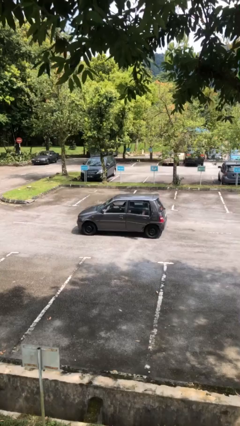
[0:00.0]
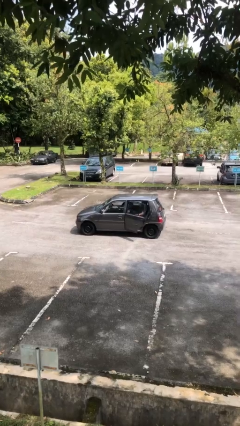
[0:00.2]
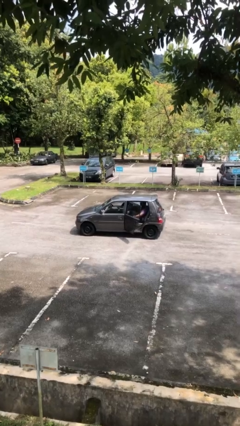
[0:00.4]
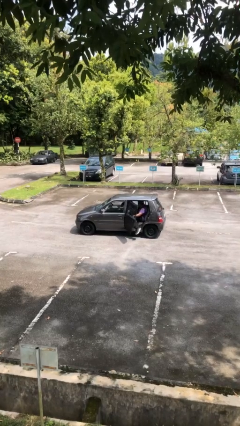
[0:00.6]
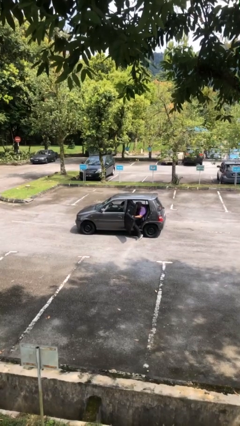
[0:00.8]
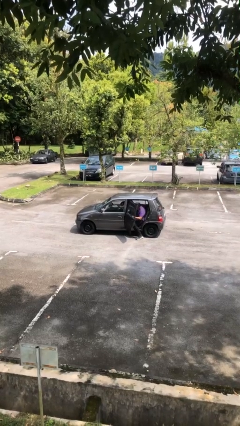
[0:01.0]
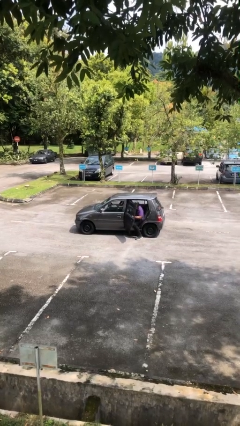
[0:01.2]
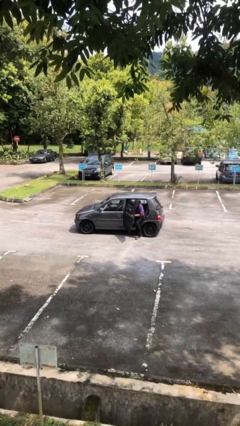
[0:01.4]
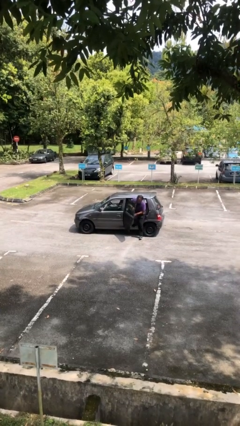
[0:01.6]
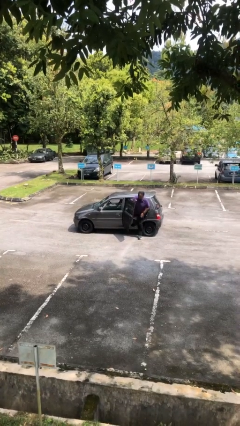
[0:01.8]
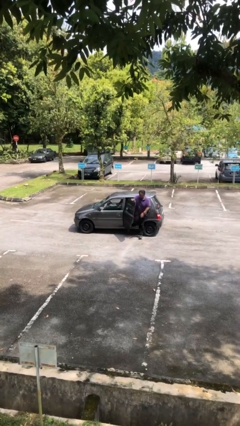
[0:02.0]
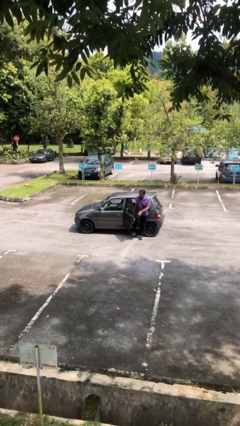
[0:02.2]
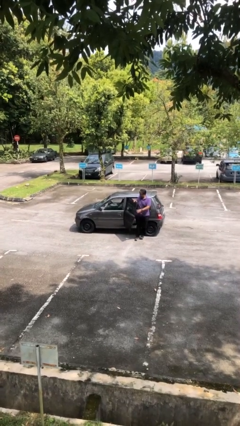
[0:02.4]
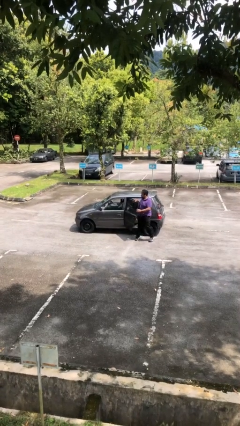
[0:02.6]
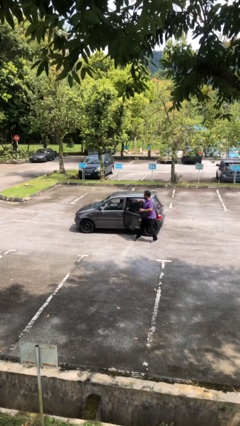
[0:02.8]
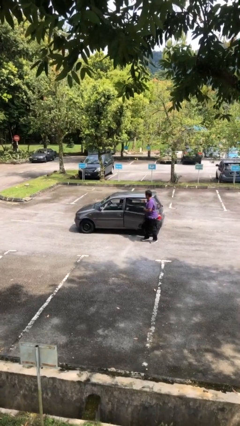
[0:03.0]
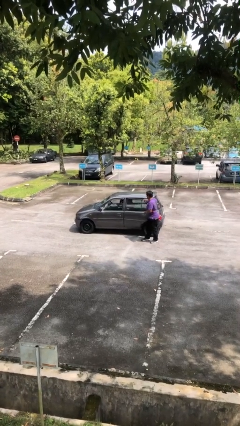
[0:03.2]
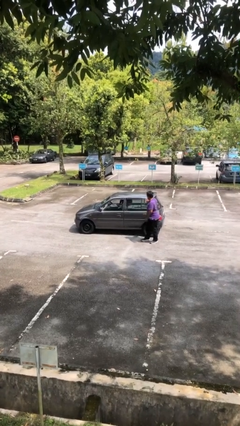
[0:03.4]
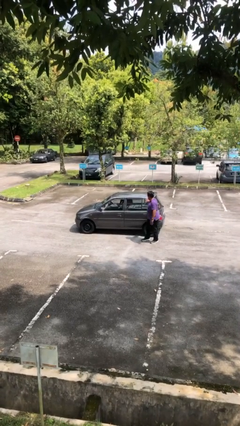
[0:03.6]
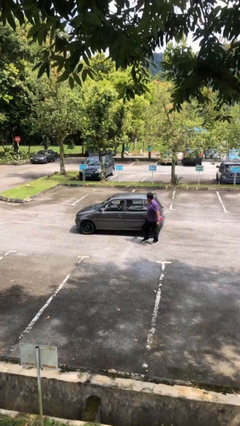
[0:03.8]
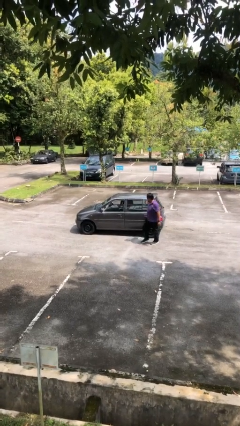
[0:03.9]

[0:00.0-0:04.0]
car drops off person

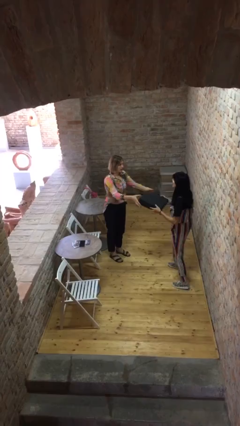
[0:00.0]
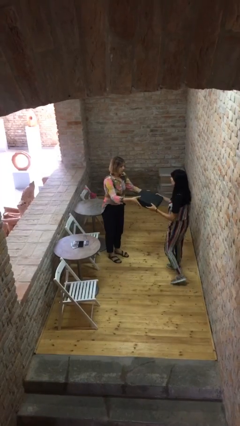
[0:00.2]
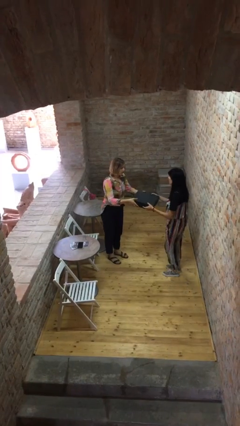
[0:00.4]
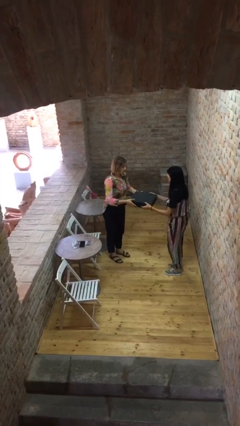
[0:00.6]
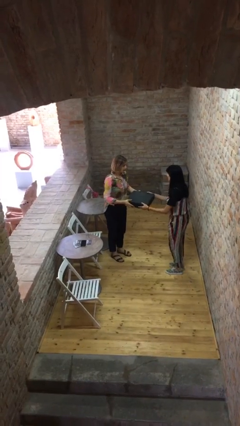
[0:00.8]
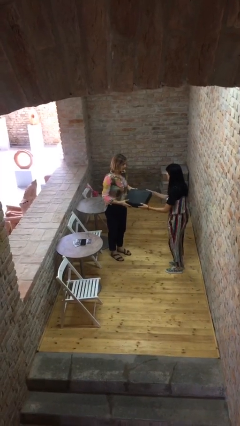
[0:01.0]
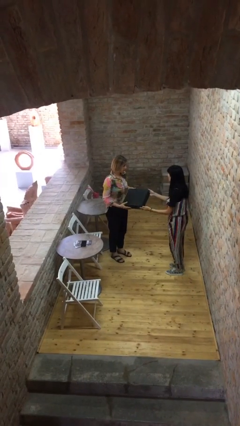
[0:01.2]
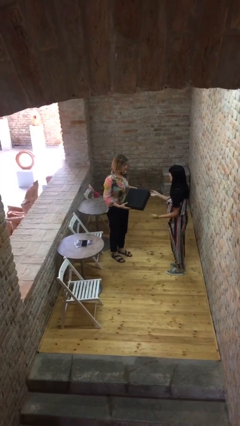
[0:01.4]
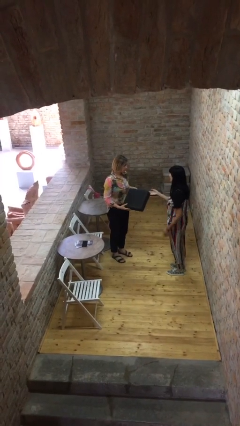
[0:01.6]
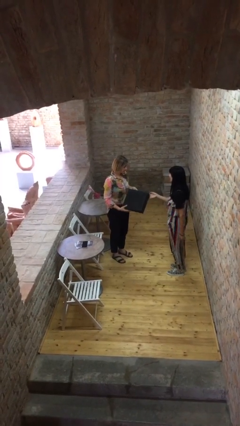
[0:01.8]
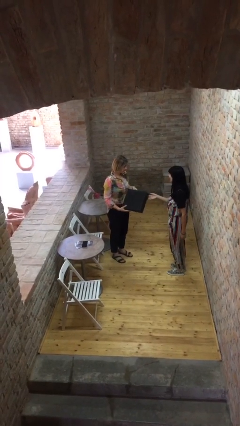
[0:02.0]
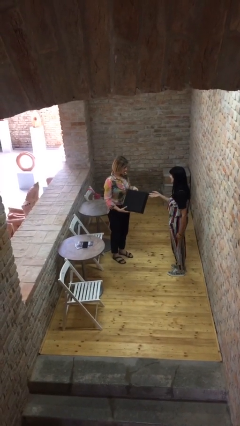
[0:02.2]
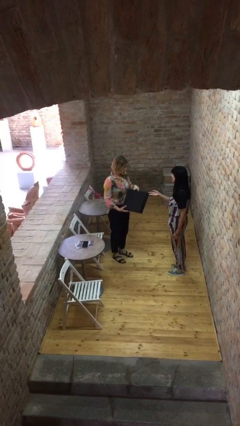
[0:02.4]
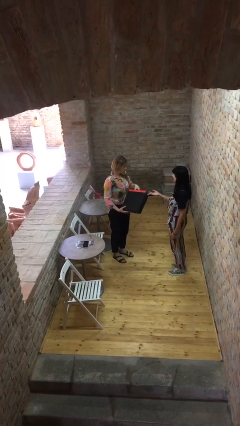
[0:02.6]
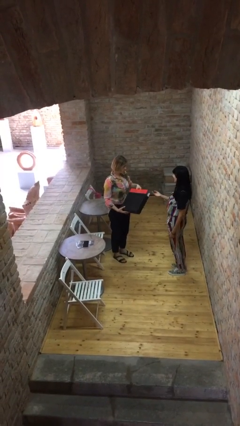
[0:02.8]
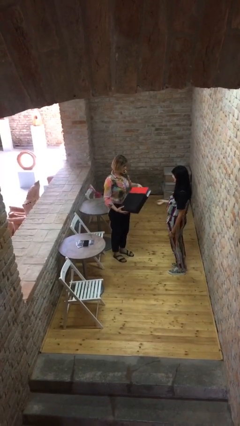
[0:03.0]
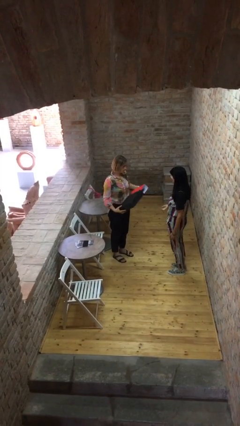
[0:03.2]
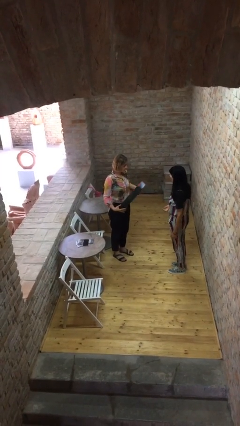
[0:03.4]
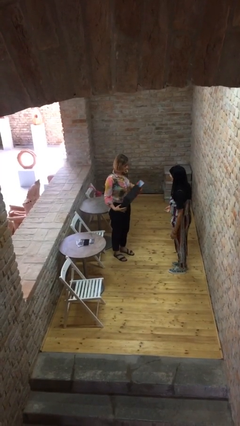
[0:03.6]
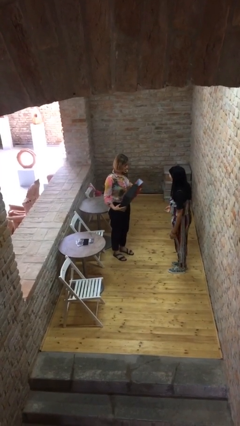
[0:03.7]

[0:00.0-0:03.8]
person transfers object to person

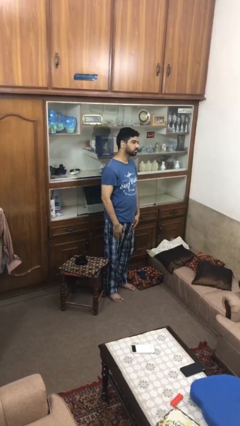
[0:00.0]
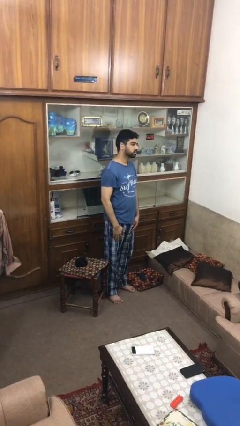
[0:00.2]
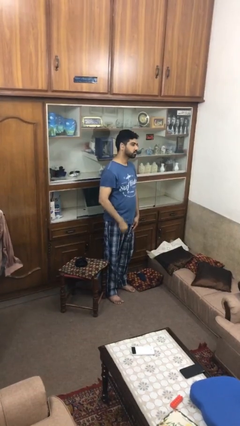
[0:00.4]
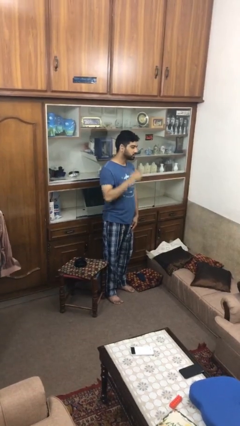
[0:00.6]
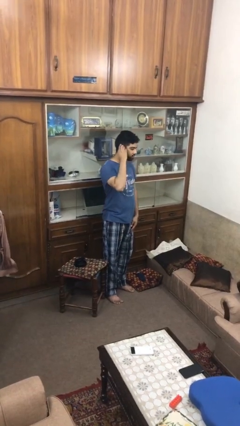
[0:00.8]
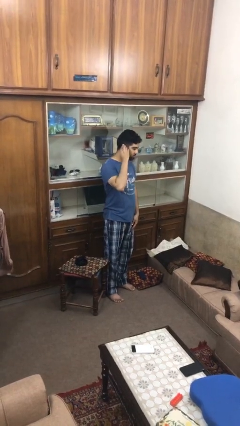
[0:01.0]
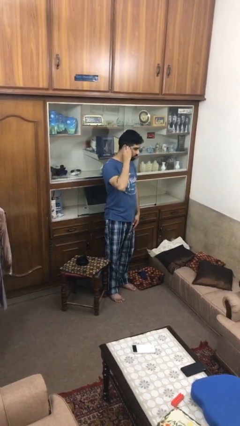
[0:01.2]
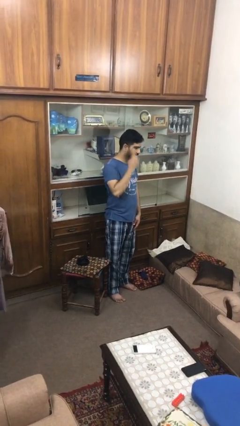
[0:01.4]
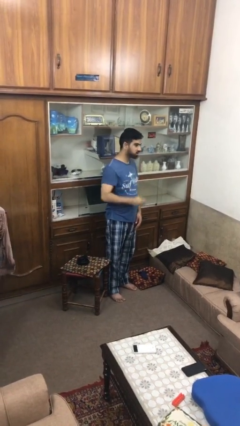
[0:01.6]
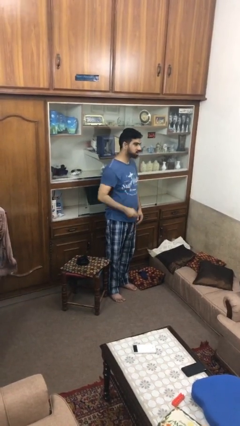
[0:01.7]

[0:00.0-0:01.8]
person takes off earrings

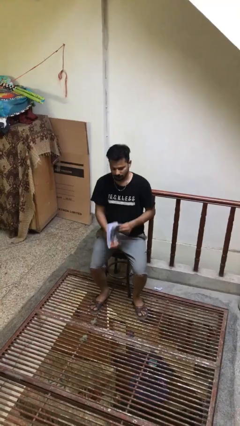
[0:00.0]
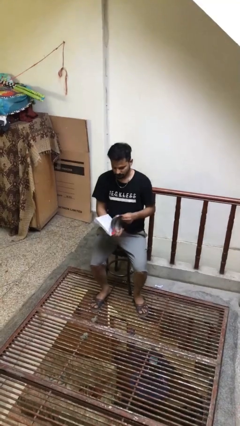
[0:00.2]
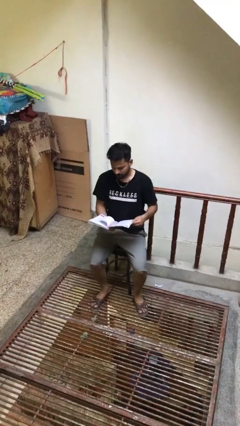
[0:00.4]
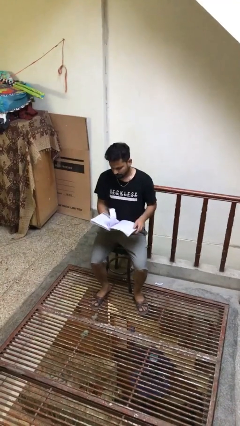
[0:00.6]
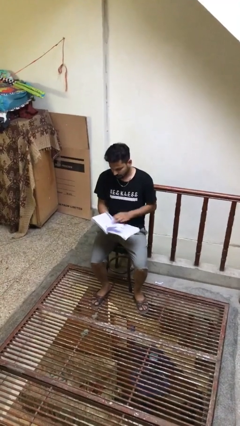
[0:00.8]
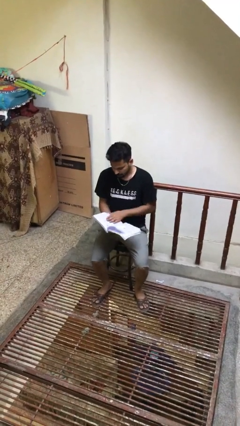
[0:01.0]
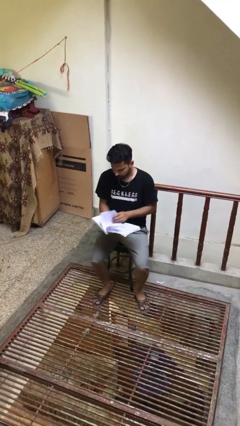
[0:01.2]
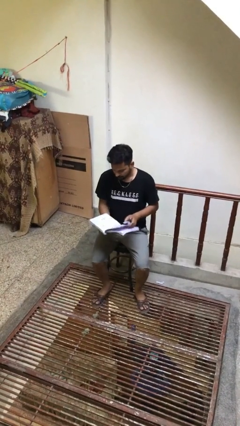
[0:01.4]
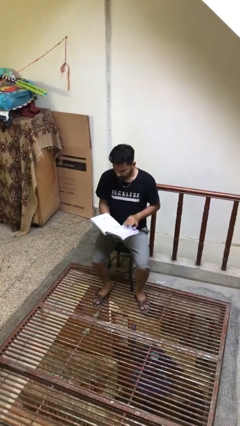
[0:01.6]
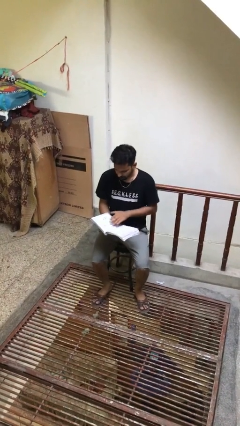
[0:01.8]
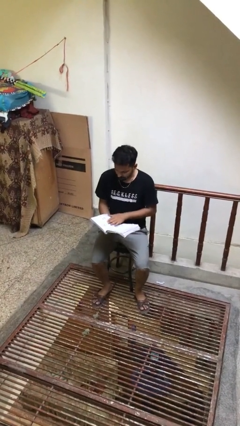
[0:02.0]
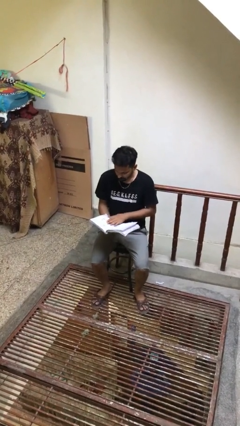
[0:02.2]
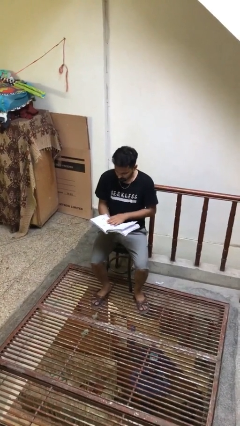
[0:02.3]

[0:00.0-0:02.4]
person reads document

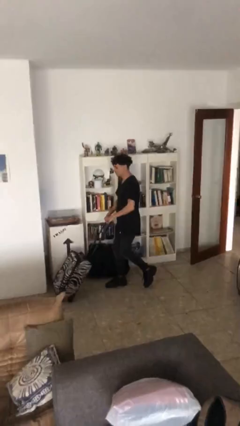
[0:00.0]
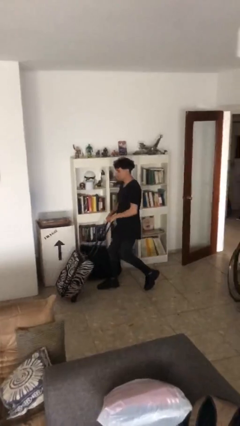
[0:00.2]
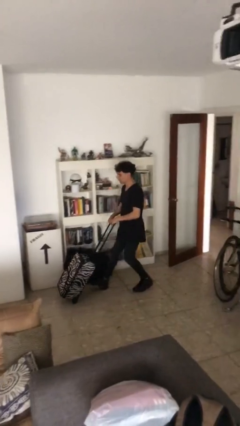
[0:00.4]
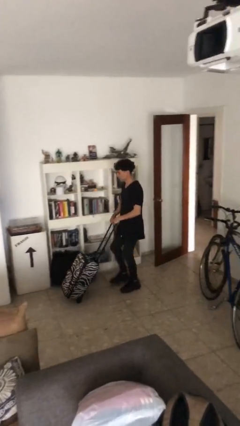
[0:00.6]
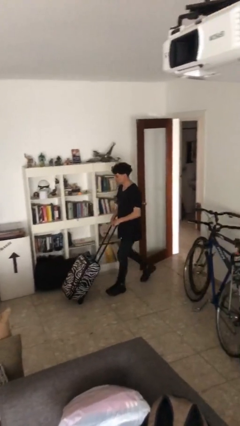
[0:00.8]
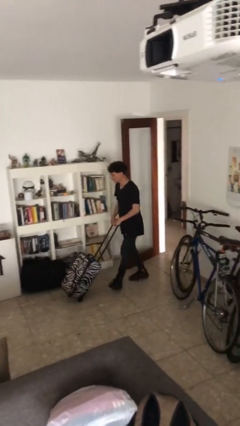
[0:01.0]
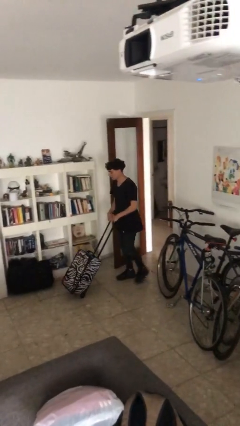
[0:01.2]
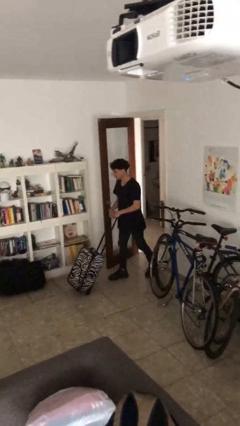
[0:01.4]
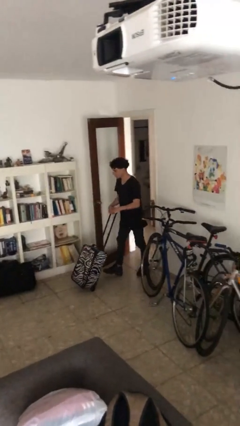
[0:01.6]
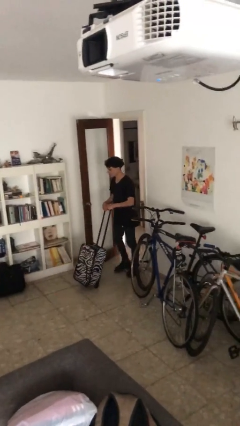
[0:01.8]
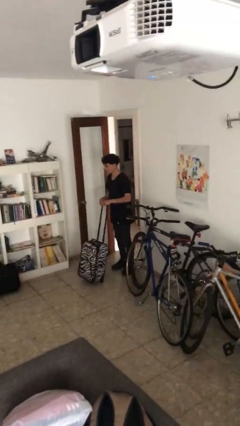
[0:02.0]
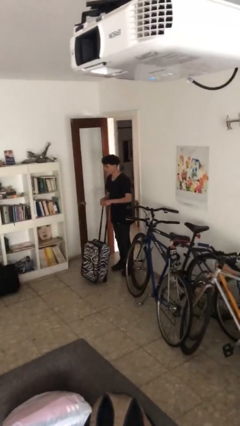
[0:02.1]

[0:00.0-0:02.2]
person pulls wheeled cart

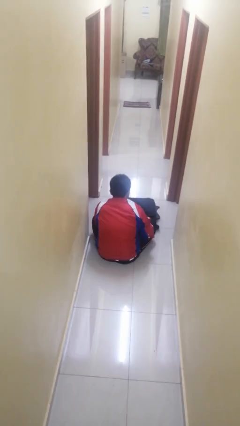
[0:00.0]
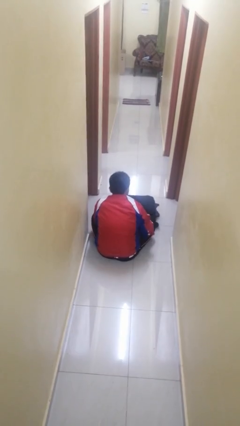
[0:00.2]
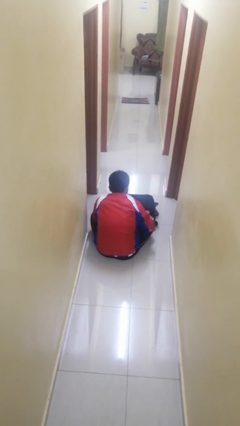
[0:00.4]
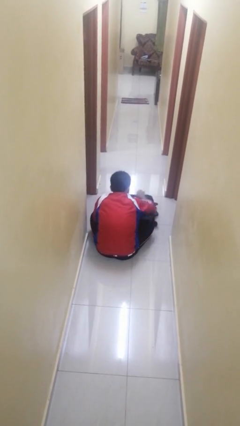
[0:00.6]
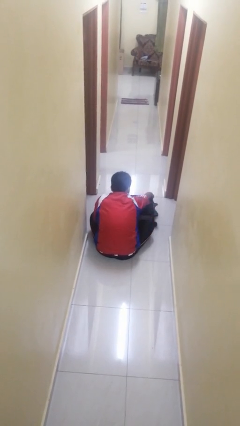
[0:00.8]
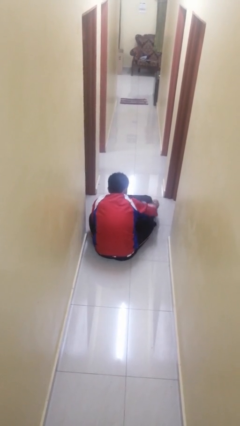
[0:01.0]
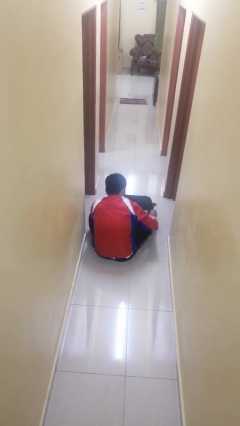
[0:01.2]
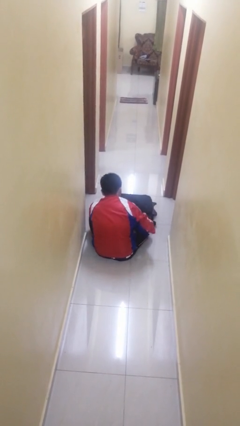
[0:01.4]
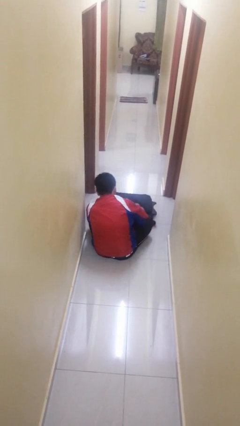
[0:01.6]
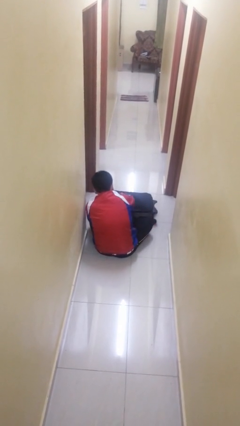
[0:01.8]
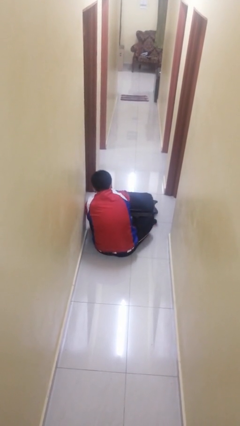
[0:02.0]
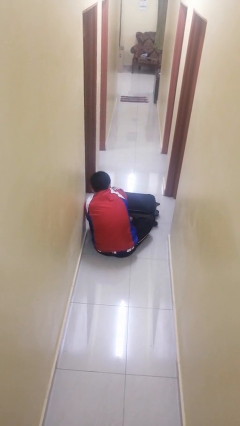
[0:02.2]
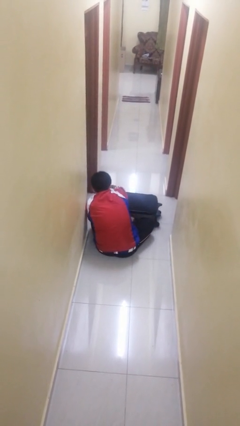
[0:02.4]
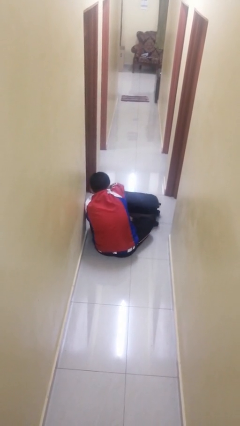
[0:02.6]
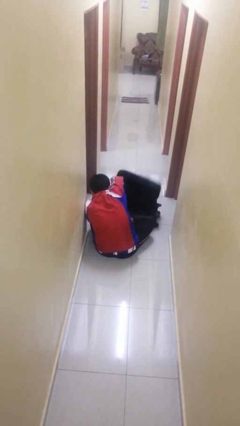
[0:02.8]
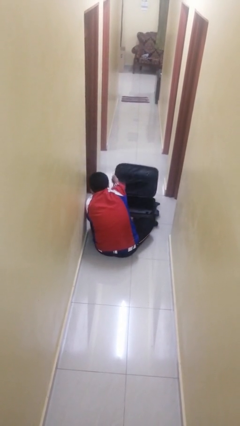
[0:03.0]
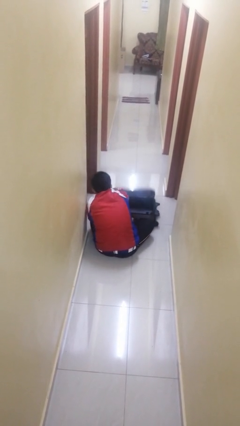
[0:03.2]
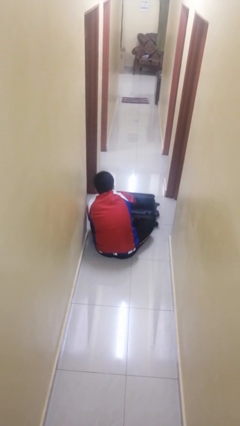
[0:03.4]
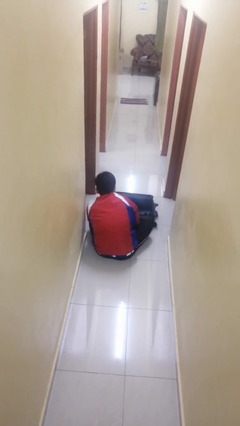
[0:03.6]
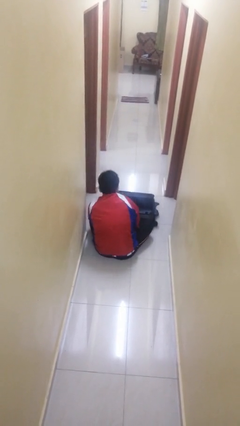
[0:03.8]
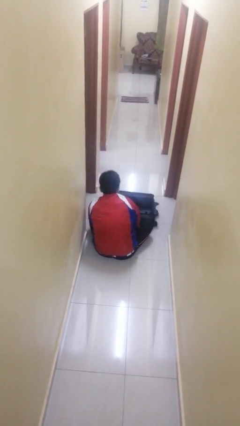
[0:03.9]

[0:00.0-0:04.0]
person opens suitcase
